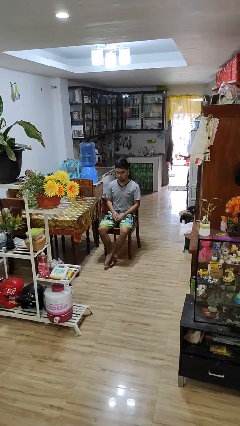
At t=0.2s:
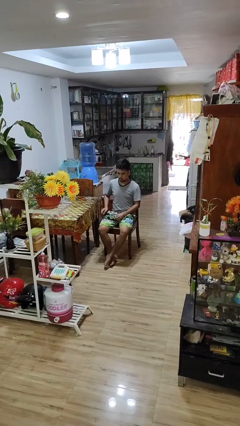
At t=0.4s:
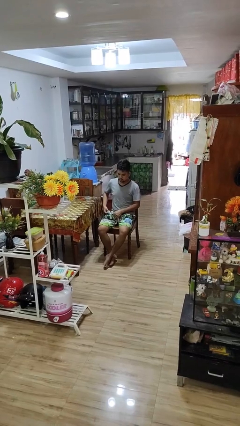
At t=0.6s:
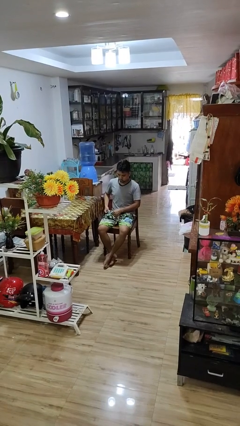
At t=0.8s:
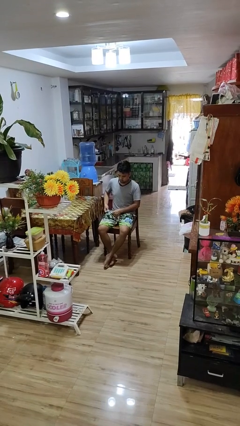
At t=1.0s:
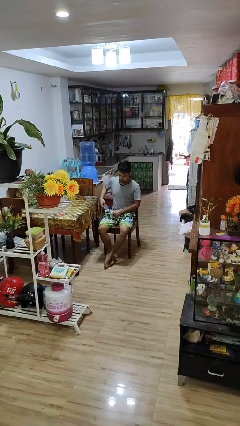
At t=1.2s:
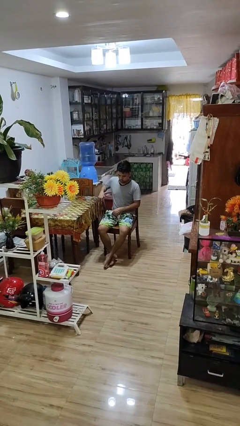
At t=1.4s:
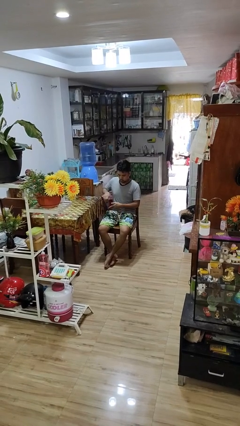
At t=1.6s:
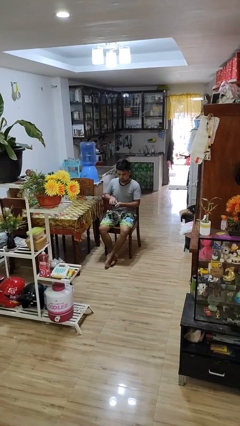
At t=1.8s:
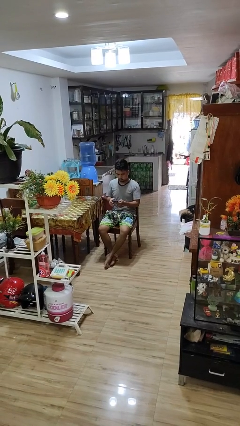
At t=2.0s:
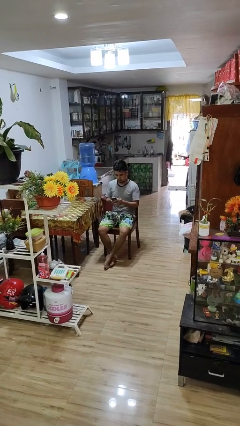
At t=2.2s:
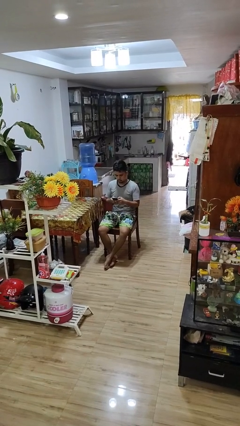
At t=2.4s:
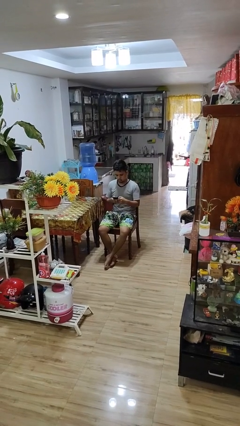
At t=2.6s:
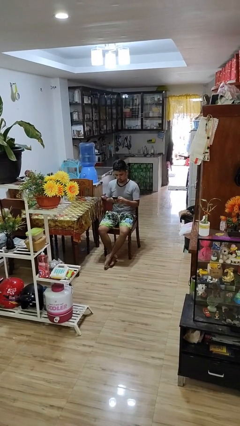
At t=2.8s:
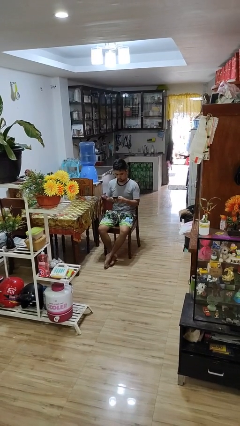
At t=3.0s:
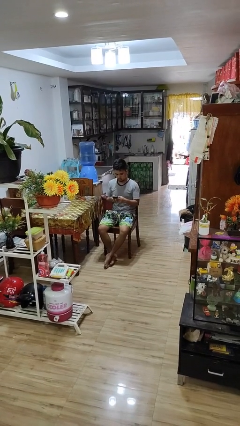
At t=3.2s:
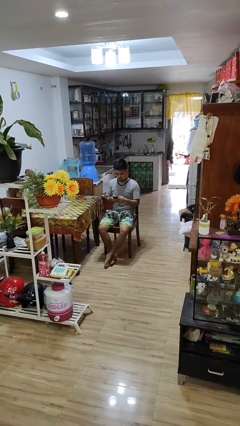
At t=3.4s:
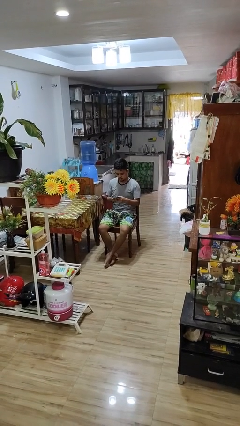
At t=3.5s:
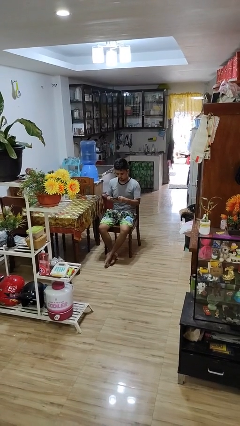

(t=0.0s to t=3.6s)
person takes phone from pocket

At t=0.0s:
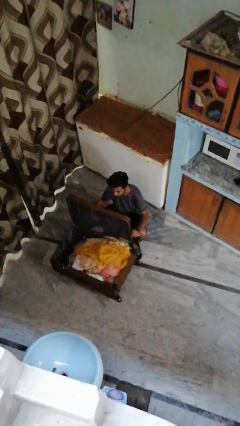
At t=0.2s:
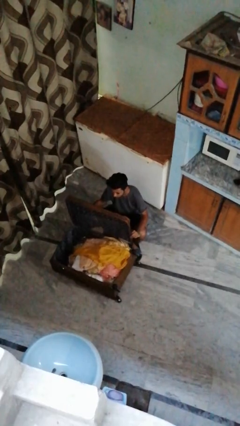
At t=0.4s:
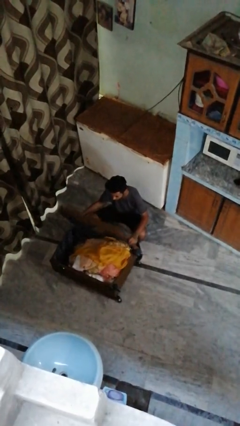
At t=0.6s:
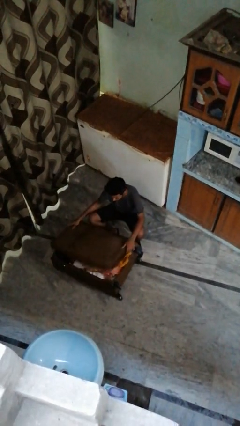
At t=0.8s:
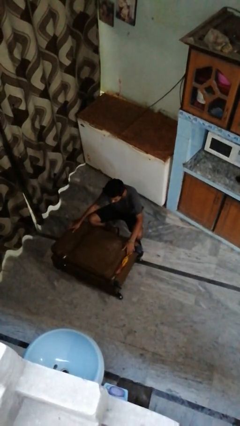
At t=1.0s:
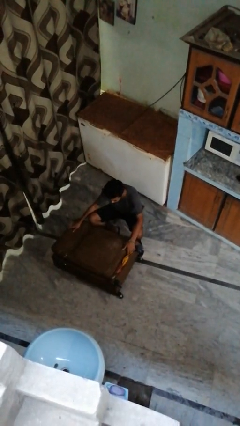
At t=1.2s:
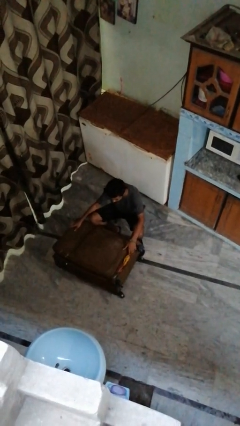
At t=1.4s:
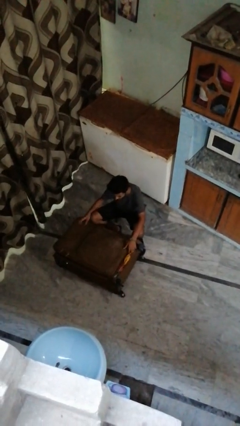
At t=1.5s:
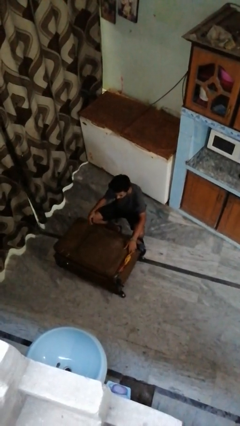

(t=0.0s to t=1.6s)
person closes suitcase

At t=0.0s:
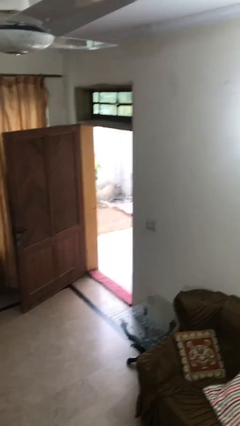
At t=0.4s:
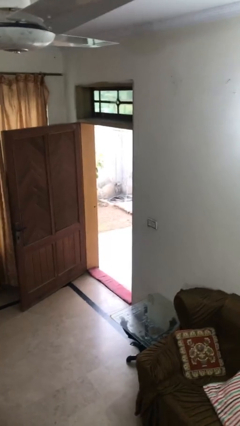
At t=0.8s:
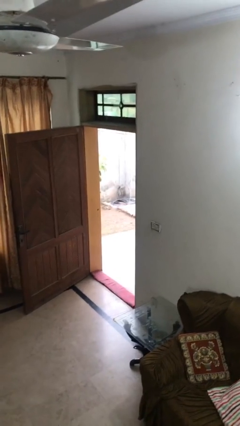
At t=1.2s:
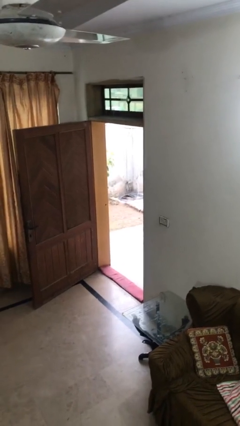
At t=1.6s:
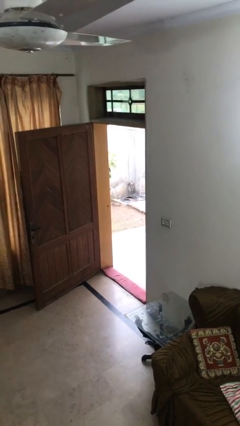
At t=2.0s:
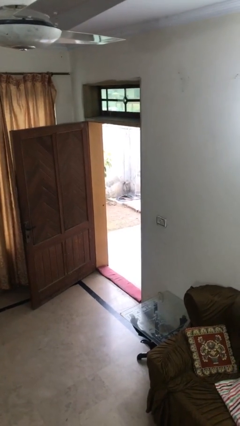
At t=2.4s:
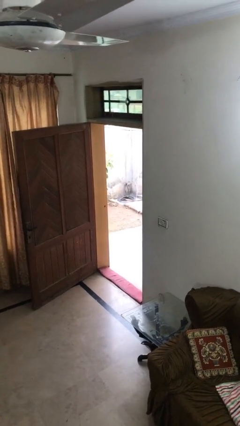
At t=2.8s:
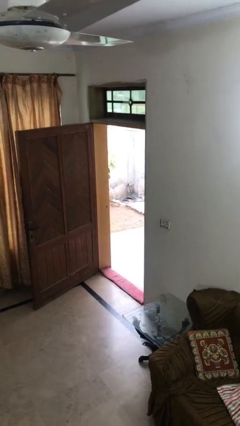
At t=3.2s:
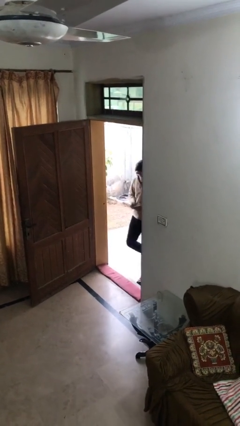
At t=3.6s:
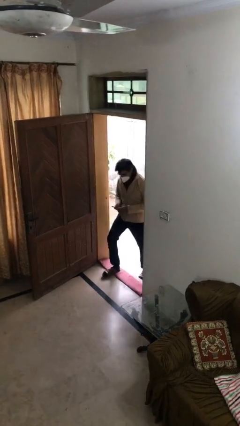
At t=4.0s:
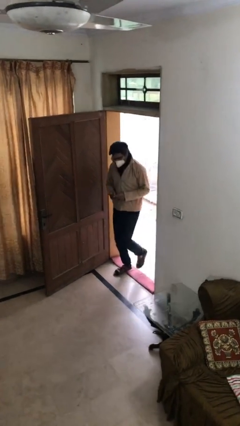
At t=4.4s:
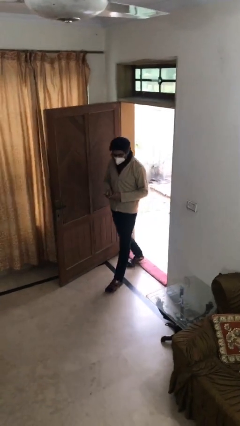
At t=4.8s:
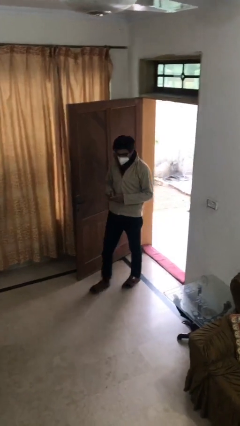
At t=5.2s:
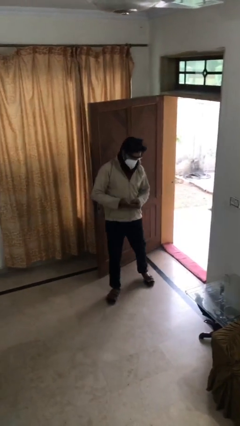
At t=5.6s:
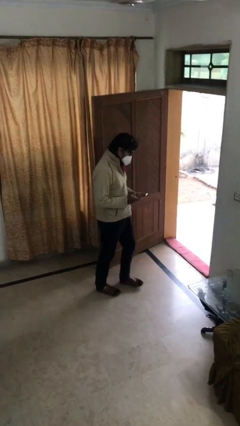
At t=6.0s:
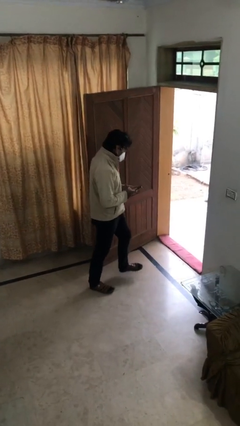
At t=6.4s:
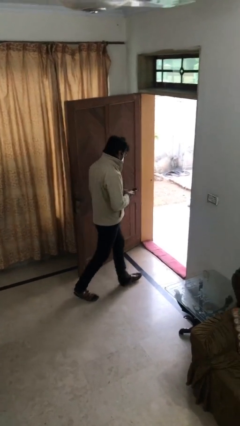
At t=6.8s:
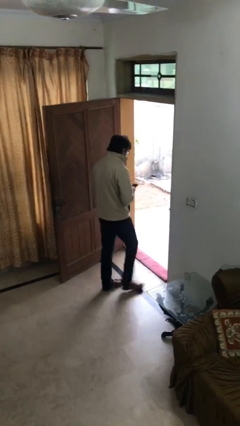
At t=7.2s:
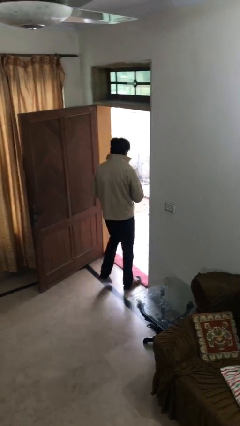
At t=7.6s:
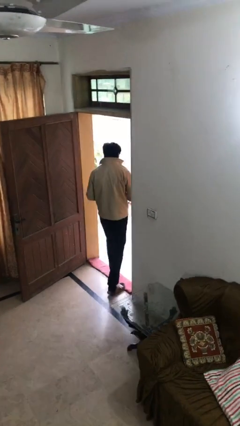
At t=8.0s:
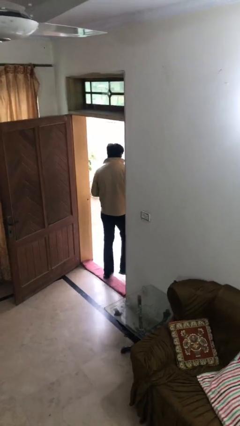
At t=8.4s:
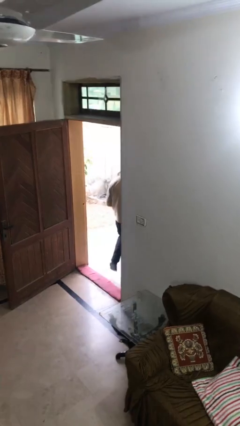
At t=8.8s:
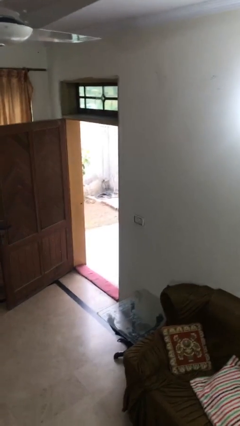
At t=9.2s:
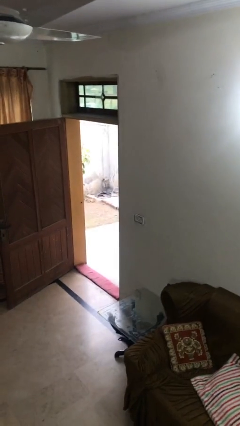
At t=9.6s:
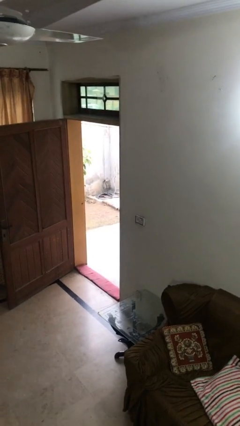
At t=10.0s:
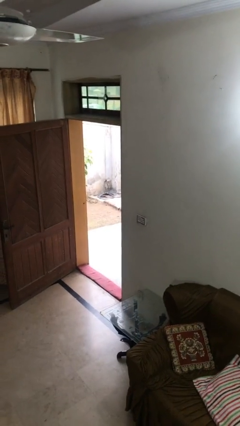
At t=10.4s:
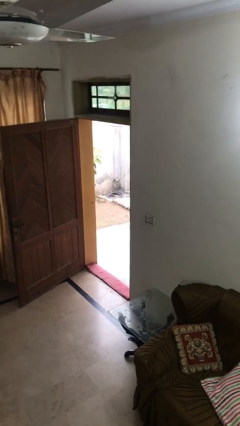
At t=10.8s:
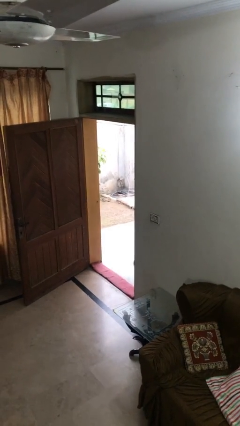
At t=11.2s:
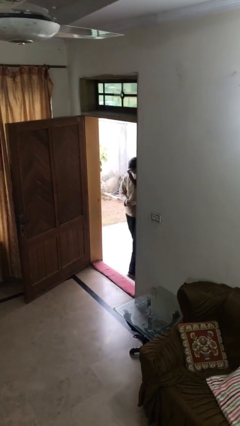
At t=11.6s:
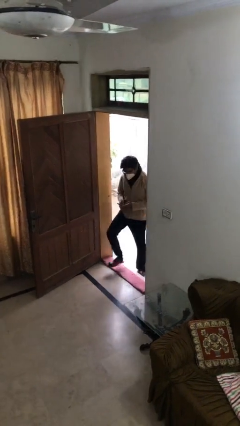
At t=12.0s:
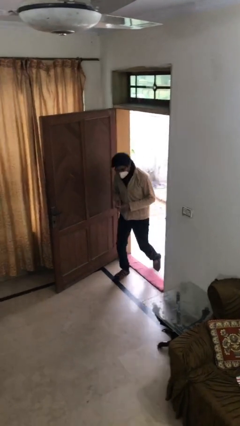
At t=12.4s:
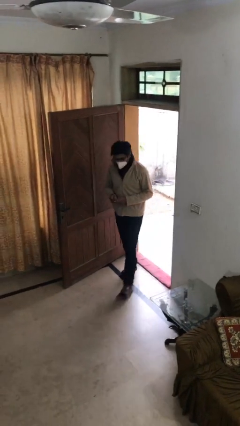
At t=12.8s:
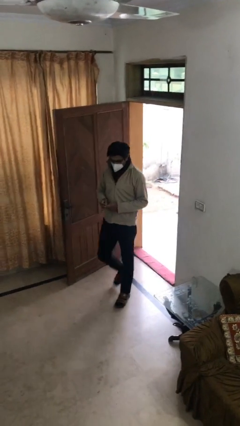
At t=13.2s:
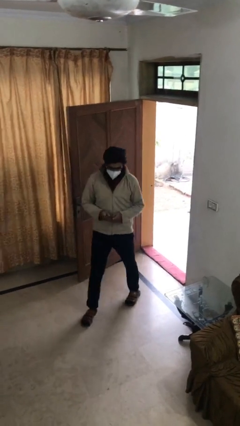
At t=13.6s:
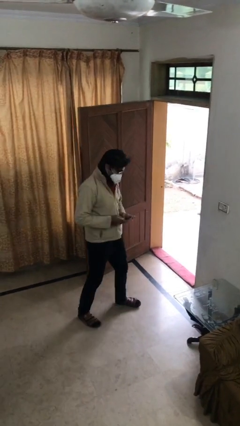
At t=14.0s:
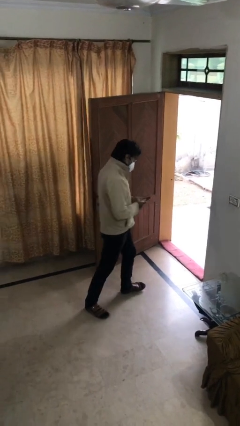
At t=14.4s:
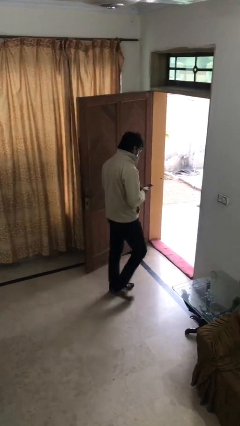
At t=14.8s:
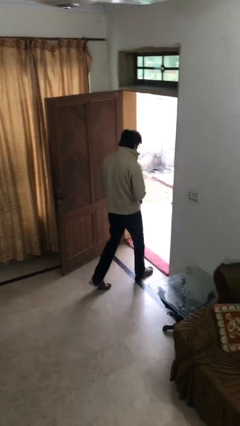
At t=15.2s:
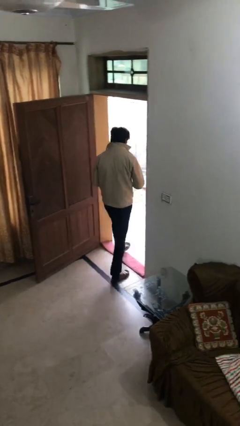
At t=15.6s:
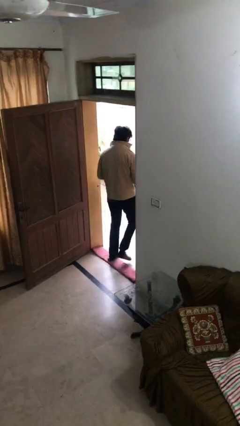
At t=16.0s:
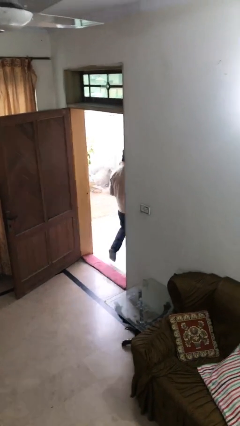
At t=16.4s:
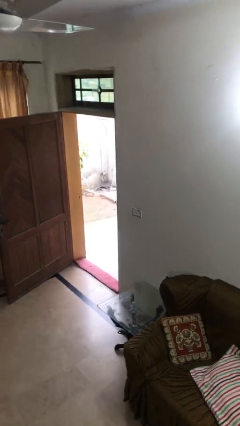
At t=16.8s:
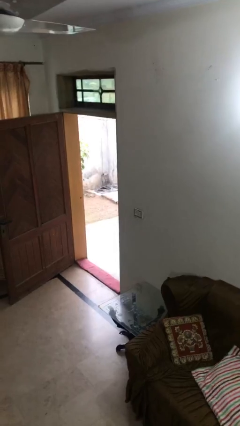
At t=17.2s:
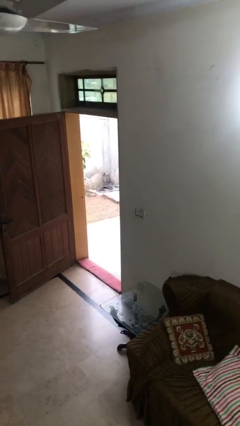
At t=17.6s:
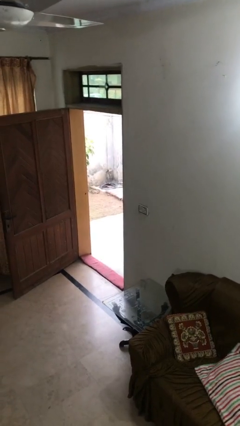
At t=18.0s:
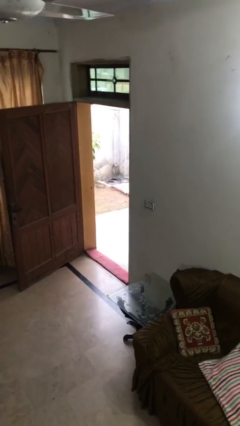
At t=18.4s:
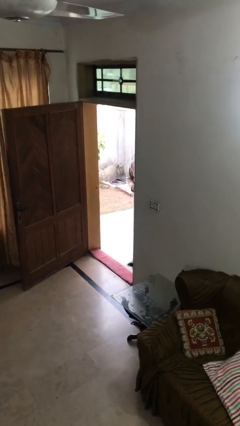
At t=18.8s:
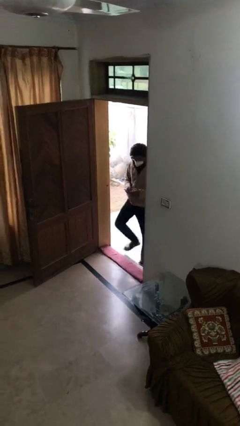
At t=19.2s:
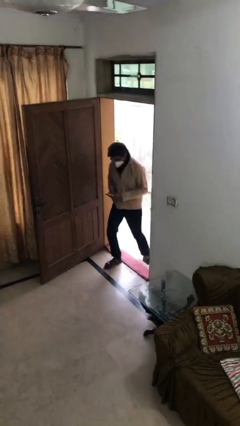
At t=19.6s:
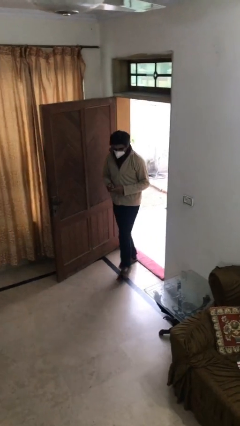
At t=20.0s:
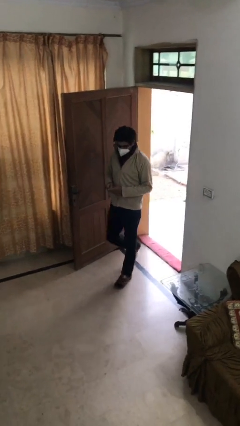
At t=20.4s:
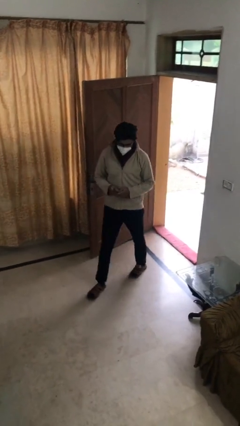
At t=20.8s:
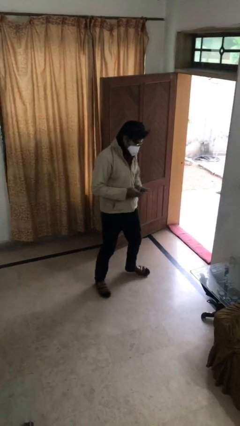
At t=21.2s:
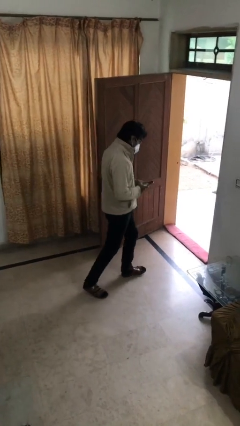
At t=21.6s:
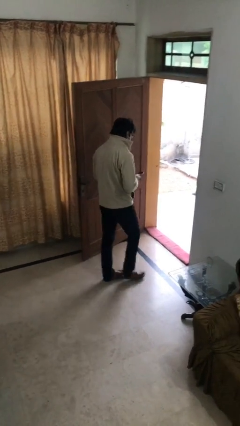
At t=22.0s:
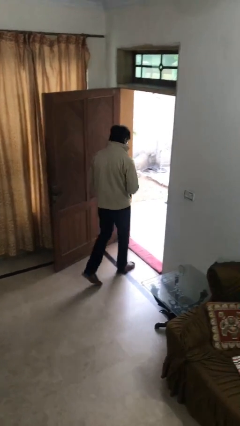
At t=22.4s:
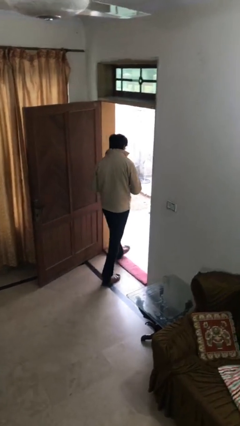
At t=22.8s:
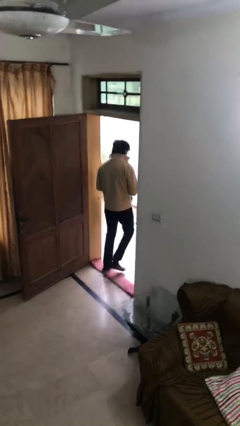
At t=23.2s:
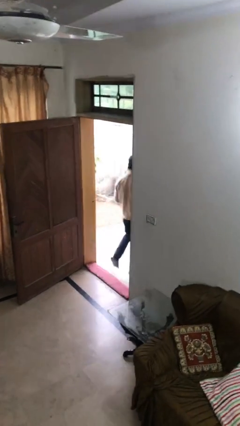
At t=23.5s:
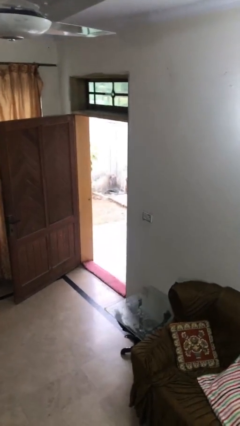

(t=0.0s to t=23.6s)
person texts on phone

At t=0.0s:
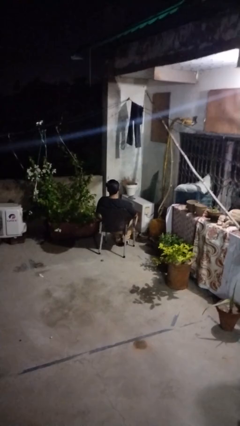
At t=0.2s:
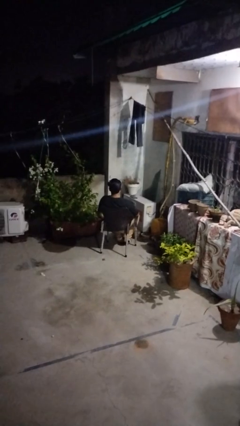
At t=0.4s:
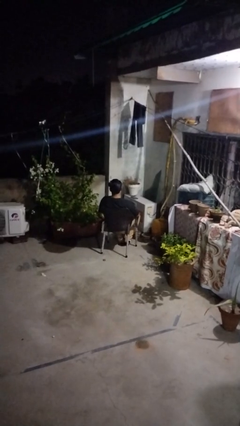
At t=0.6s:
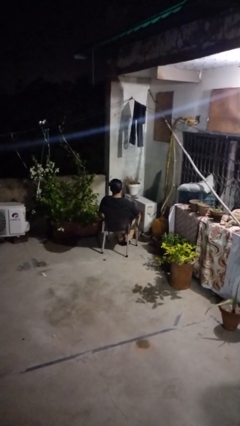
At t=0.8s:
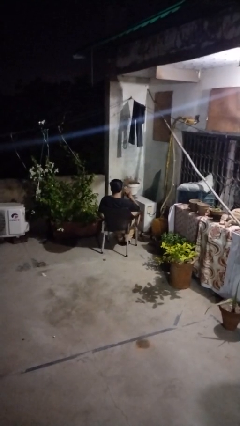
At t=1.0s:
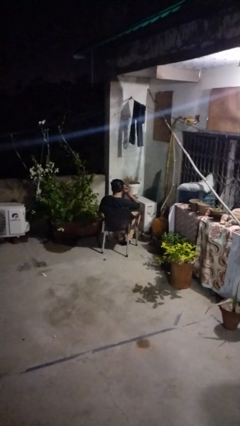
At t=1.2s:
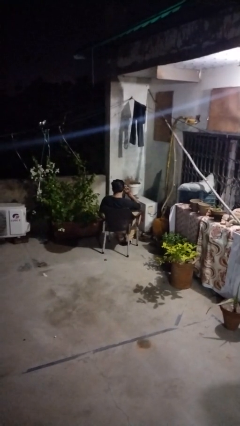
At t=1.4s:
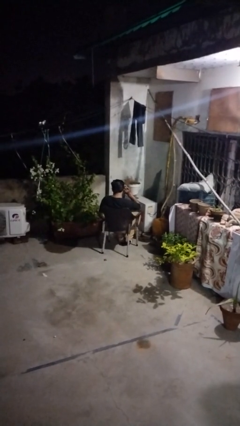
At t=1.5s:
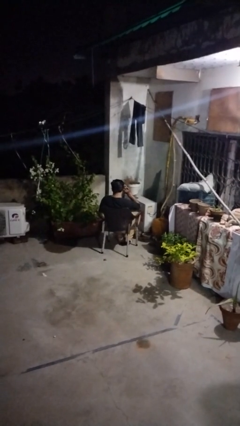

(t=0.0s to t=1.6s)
person gestures listen closely
